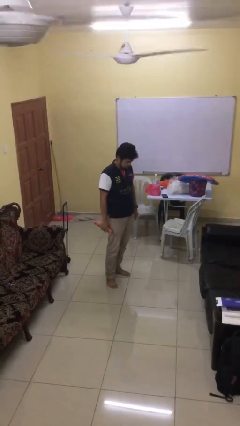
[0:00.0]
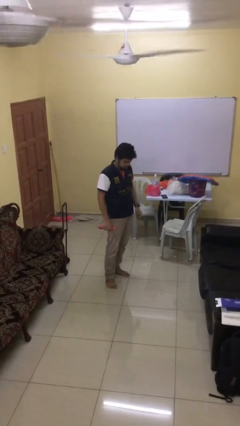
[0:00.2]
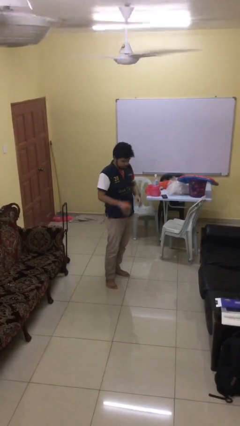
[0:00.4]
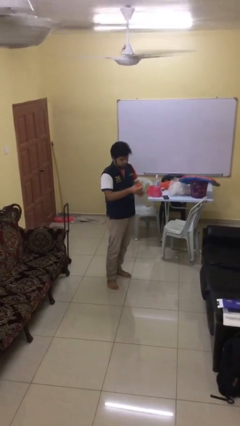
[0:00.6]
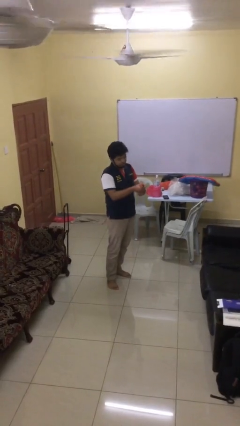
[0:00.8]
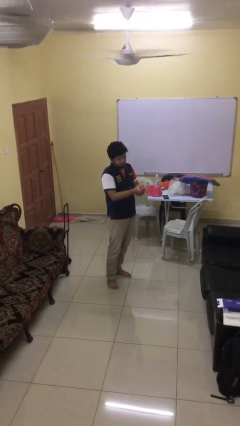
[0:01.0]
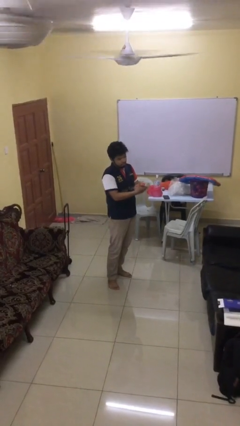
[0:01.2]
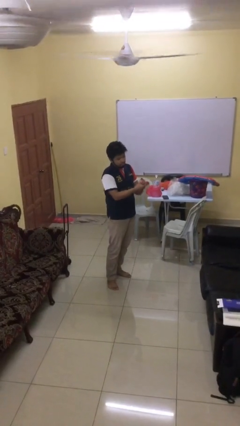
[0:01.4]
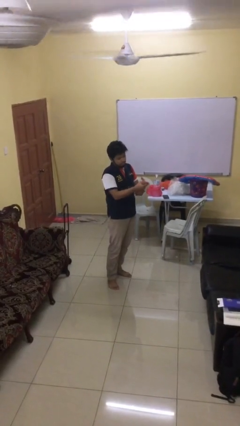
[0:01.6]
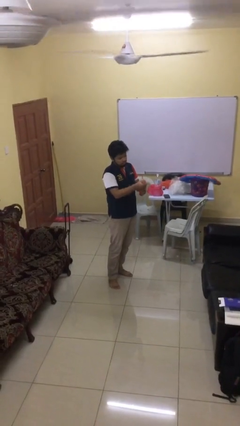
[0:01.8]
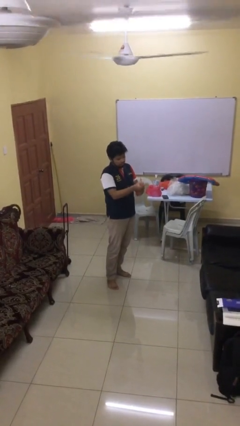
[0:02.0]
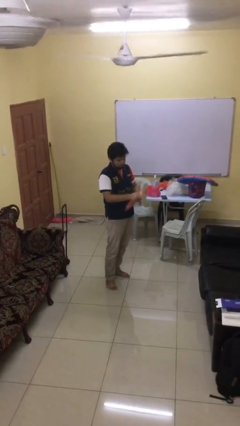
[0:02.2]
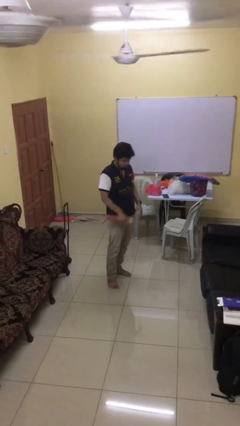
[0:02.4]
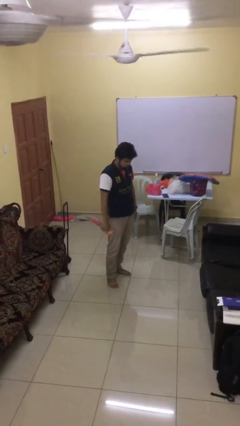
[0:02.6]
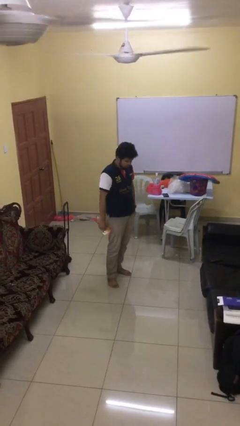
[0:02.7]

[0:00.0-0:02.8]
person squeezes object

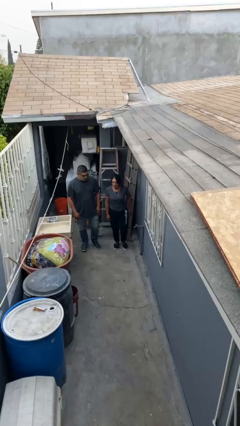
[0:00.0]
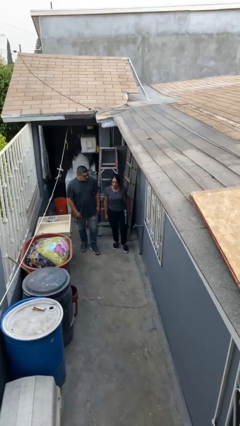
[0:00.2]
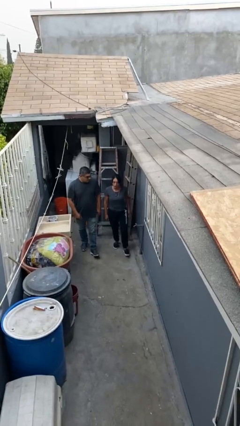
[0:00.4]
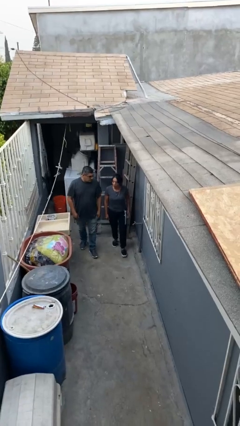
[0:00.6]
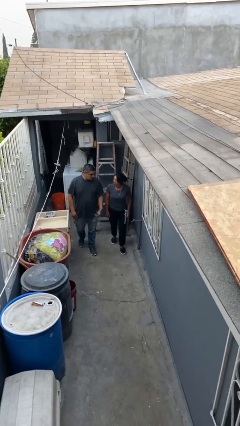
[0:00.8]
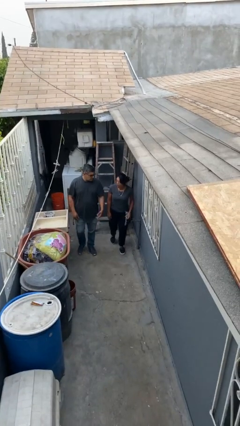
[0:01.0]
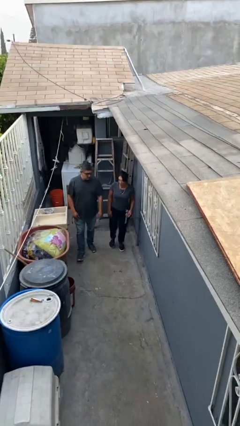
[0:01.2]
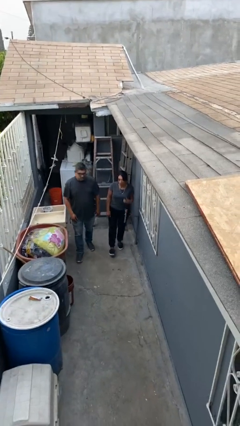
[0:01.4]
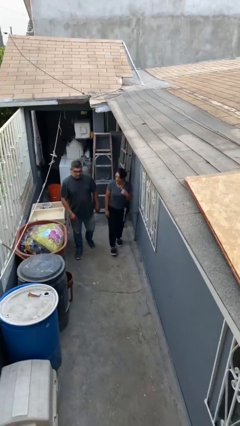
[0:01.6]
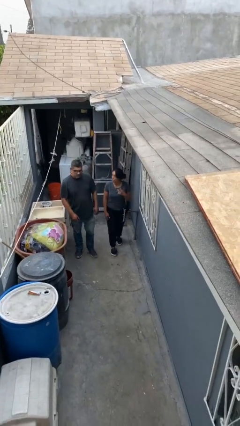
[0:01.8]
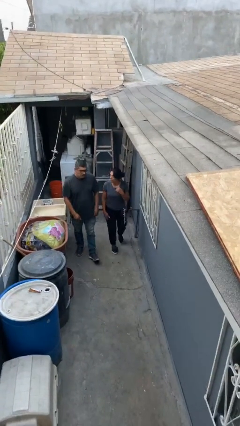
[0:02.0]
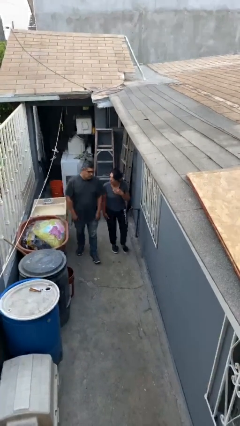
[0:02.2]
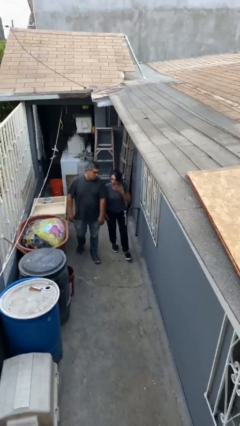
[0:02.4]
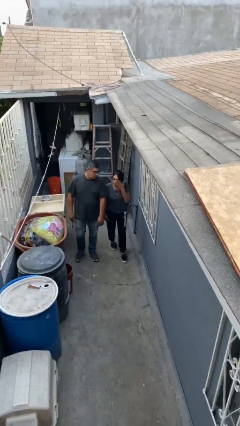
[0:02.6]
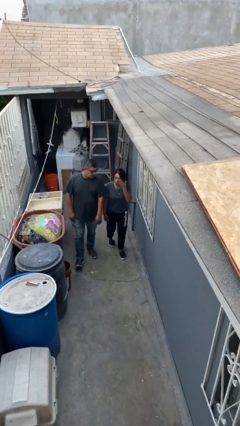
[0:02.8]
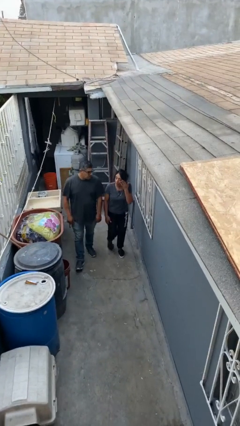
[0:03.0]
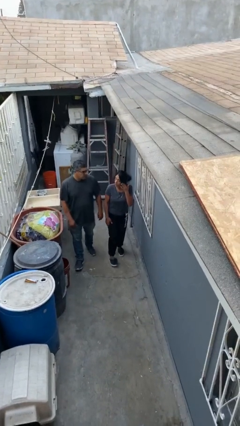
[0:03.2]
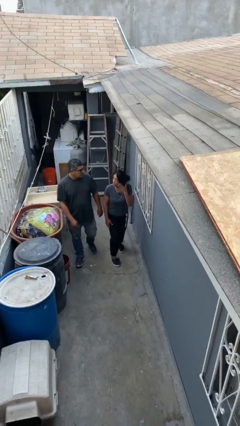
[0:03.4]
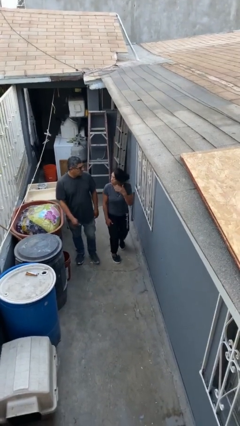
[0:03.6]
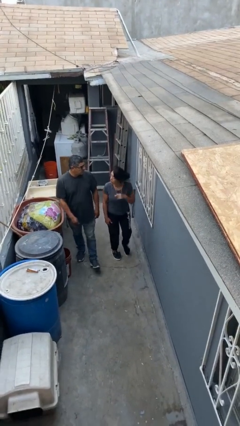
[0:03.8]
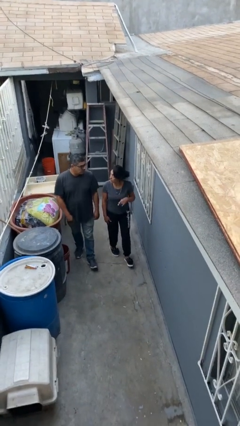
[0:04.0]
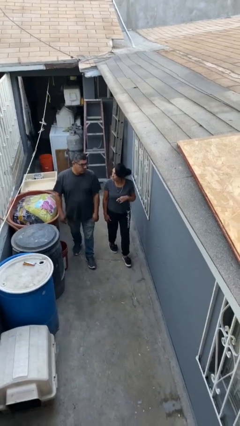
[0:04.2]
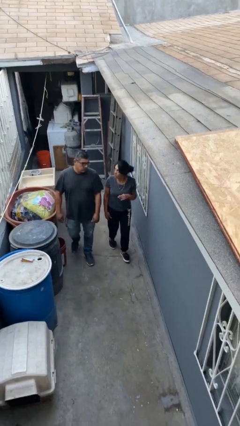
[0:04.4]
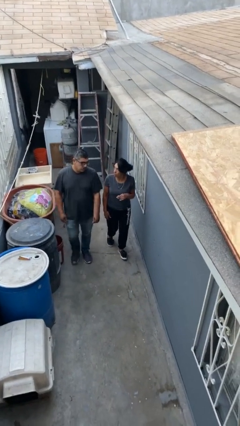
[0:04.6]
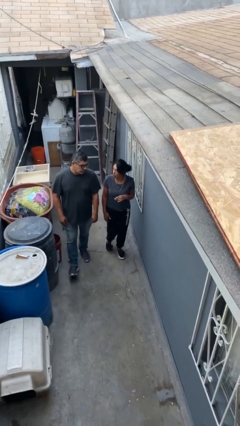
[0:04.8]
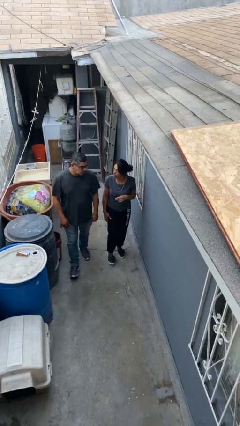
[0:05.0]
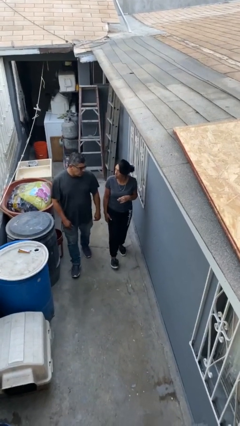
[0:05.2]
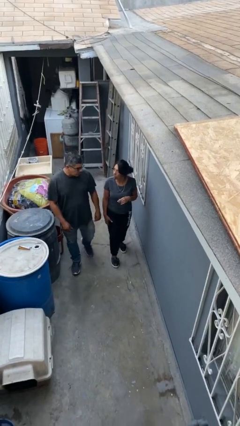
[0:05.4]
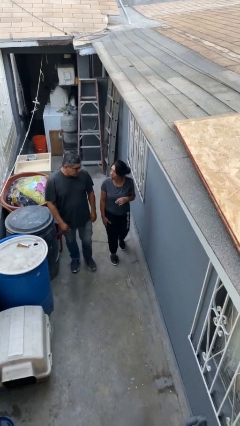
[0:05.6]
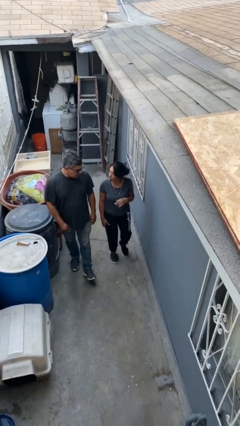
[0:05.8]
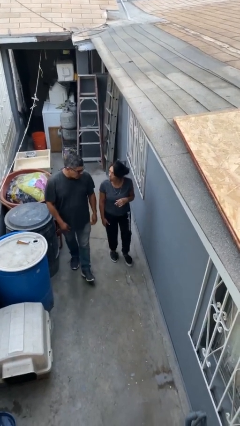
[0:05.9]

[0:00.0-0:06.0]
person talks to person

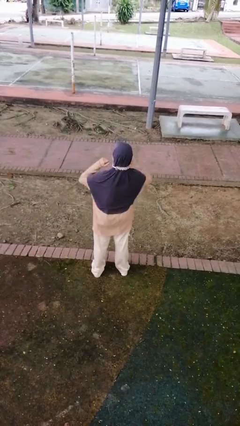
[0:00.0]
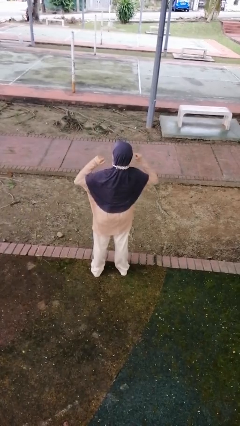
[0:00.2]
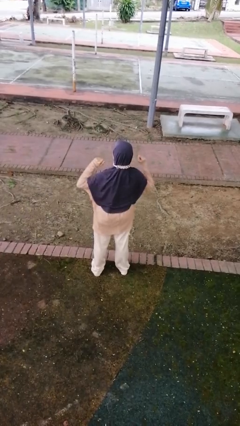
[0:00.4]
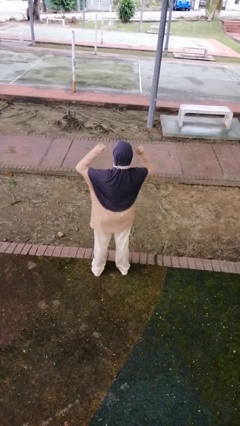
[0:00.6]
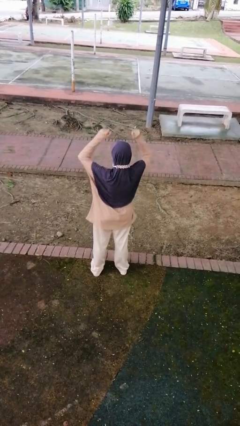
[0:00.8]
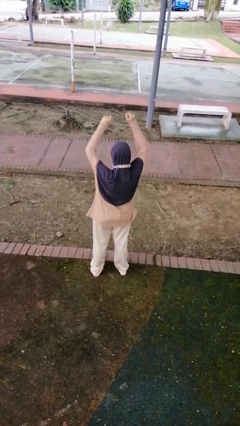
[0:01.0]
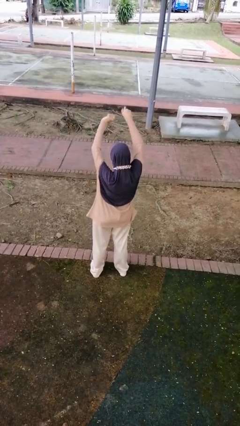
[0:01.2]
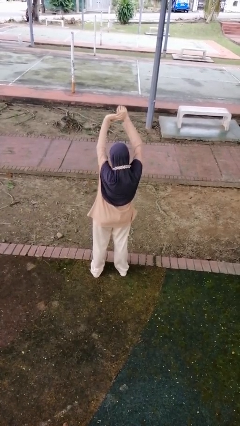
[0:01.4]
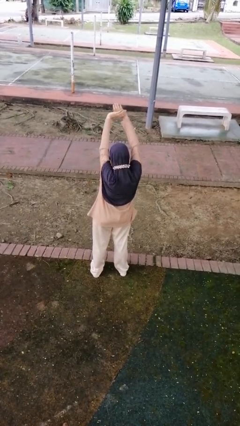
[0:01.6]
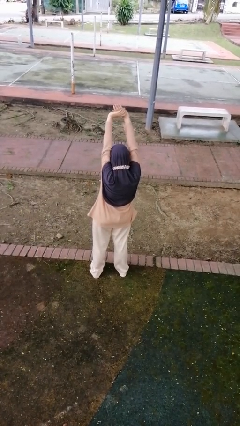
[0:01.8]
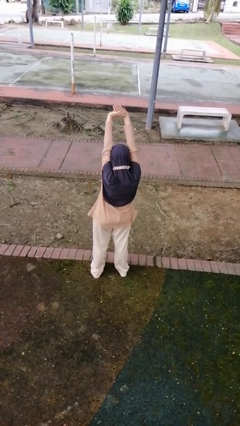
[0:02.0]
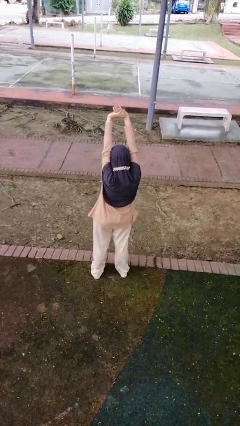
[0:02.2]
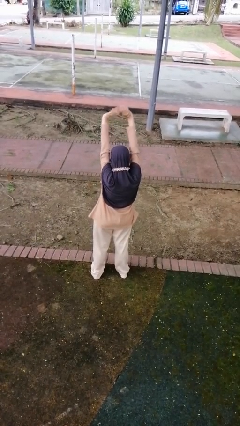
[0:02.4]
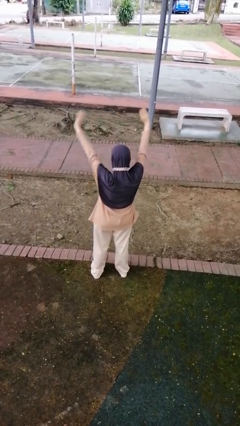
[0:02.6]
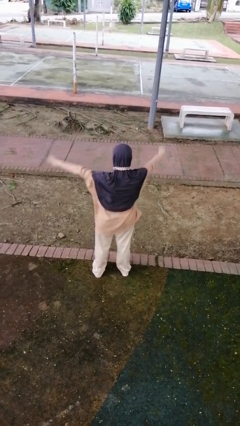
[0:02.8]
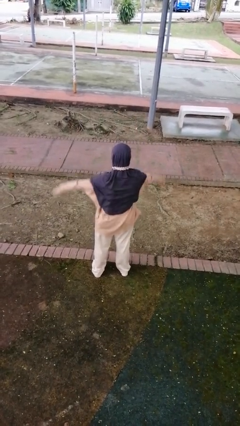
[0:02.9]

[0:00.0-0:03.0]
person stretches arms over head

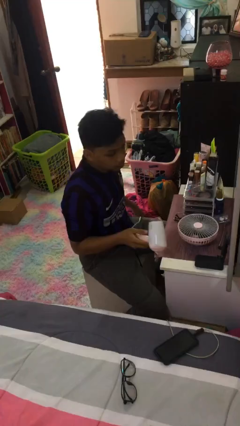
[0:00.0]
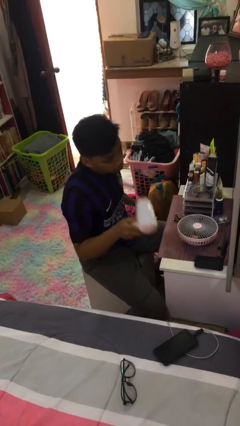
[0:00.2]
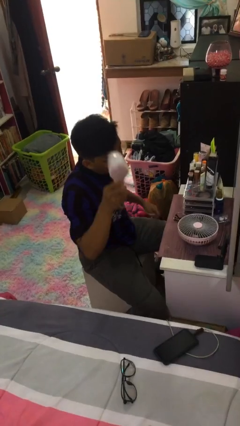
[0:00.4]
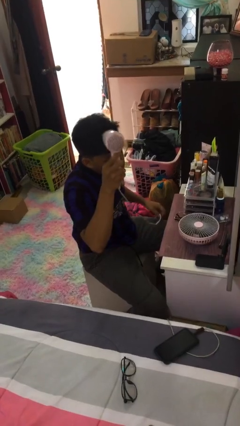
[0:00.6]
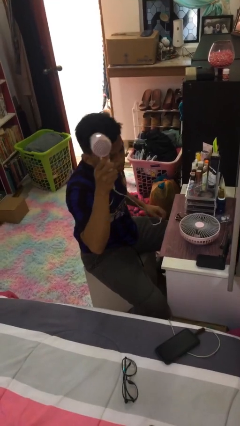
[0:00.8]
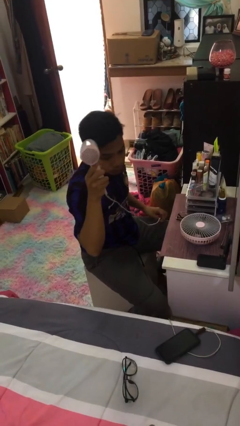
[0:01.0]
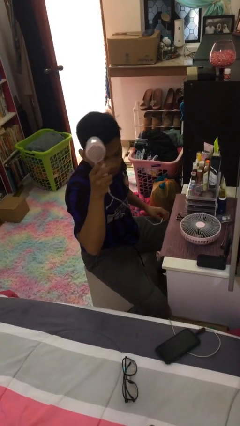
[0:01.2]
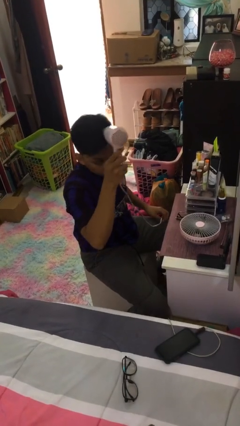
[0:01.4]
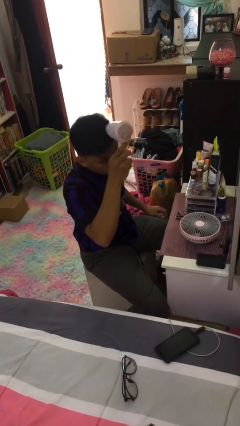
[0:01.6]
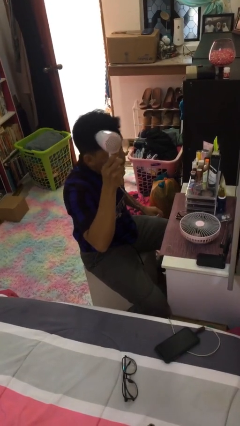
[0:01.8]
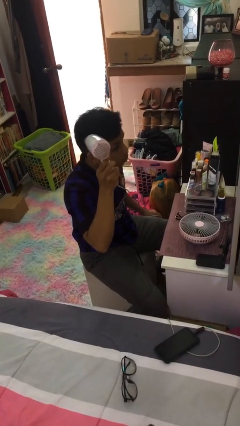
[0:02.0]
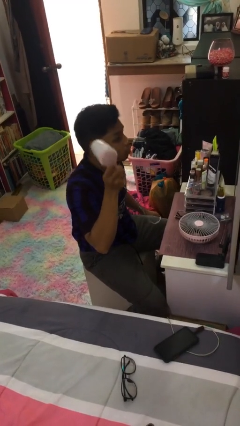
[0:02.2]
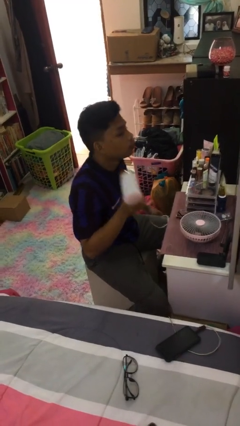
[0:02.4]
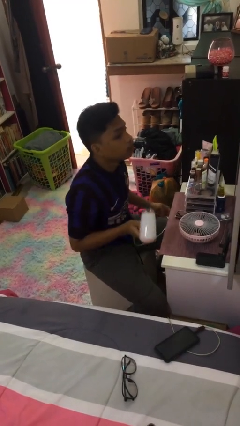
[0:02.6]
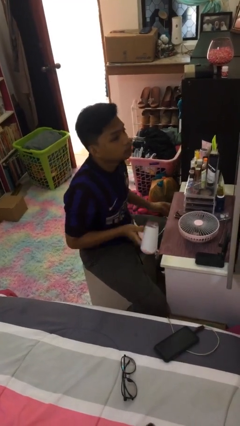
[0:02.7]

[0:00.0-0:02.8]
person dries hair with hairdryer

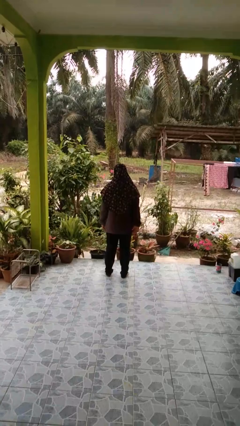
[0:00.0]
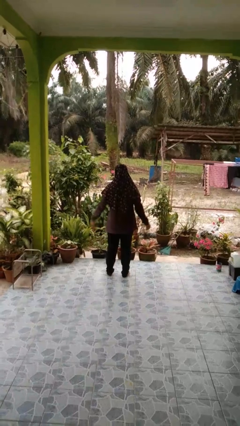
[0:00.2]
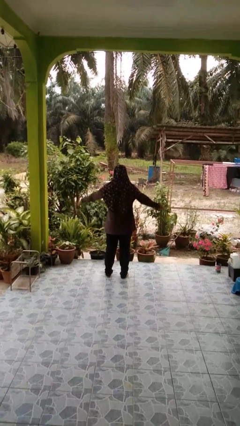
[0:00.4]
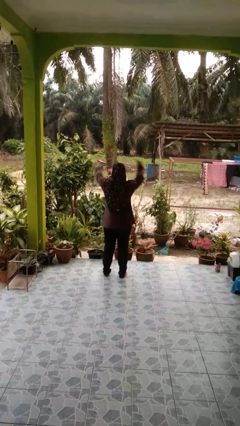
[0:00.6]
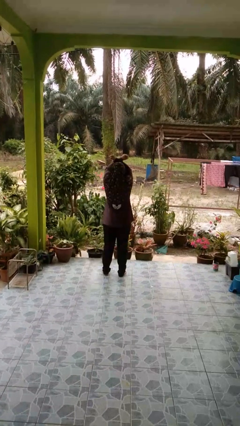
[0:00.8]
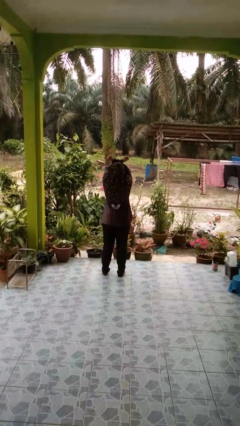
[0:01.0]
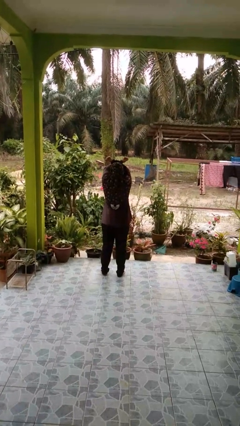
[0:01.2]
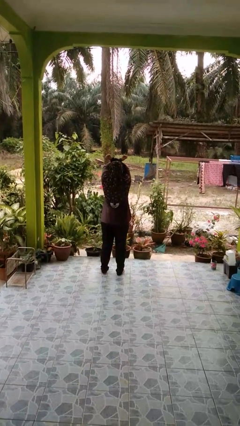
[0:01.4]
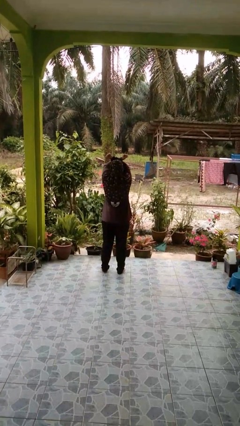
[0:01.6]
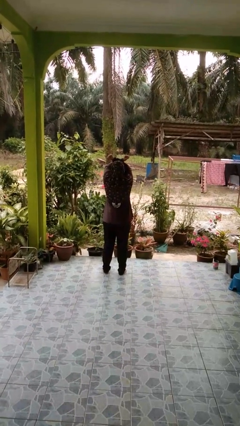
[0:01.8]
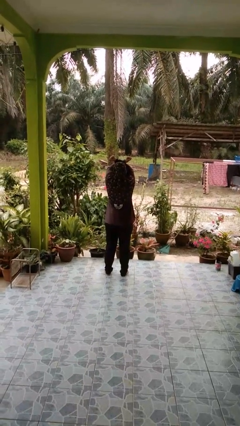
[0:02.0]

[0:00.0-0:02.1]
person crosses arms

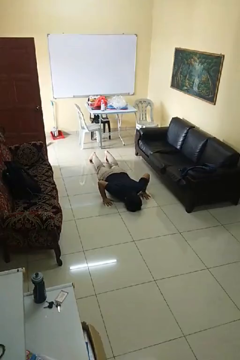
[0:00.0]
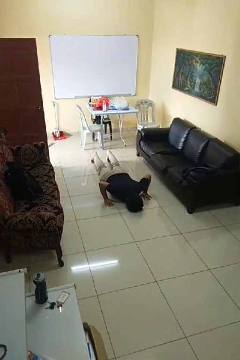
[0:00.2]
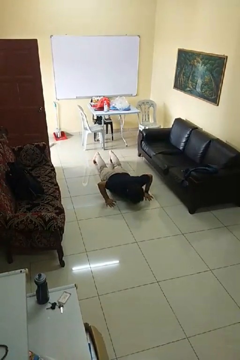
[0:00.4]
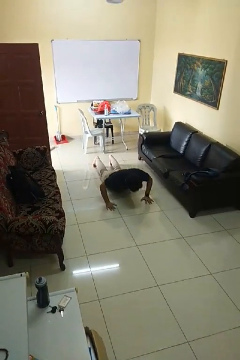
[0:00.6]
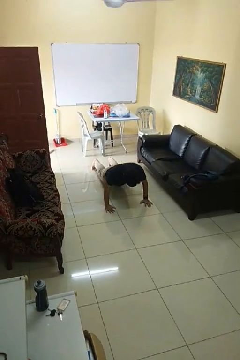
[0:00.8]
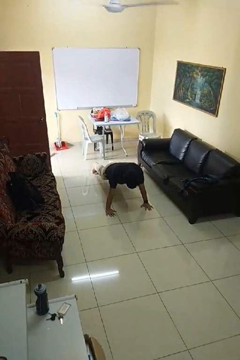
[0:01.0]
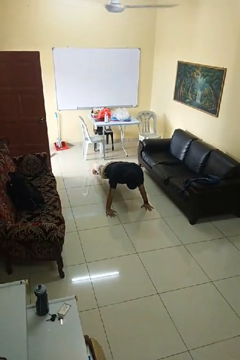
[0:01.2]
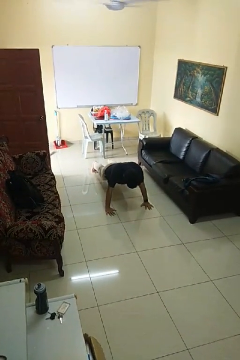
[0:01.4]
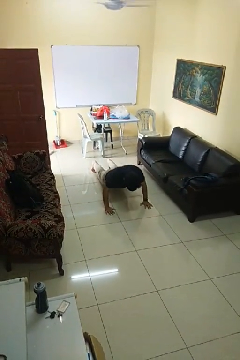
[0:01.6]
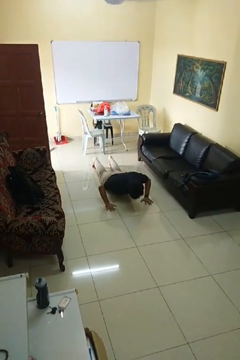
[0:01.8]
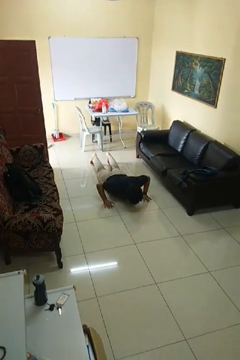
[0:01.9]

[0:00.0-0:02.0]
person exercises with pushup
